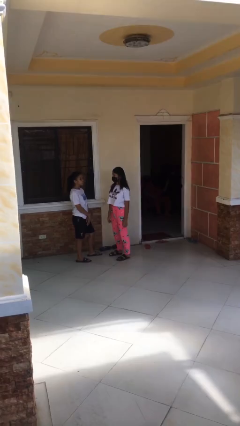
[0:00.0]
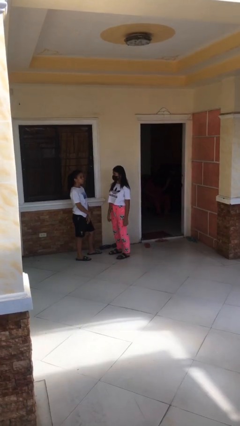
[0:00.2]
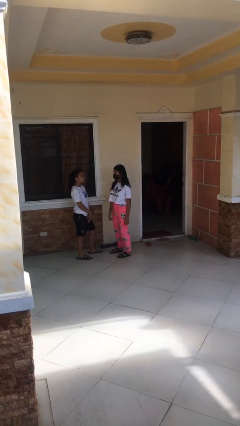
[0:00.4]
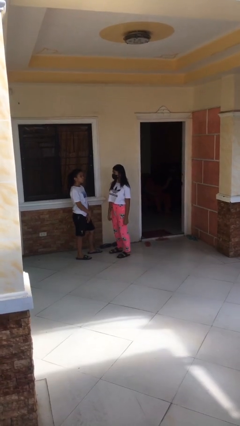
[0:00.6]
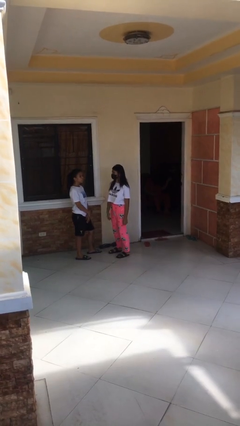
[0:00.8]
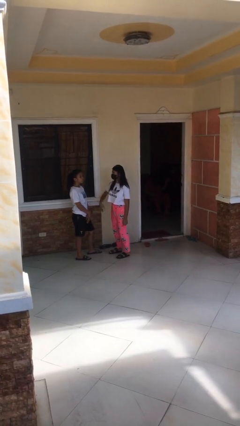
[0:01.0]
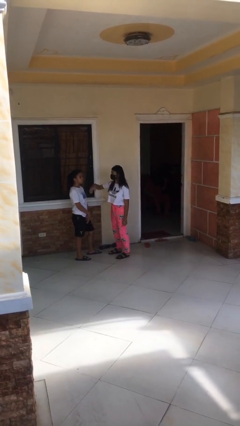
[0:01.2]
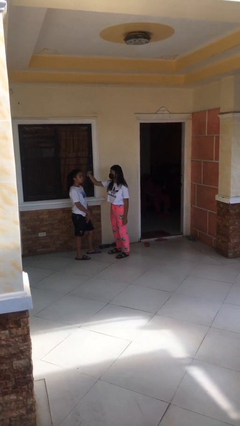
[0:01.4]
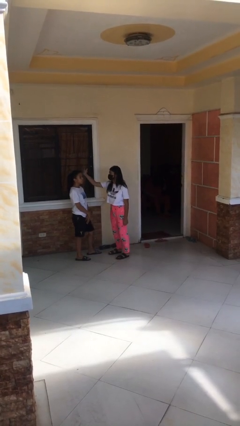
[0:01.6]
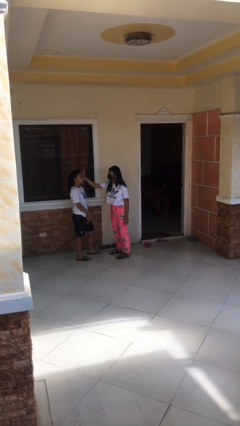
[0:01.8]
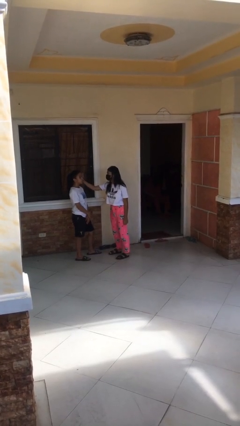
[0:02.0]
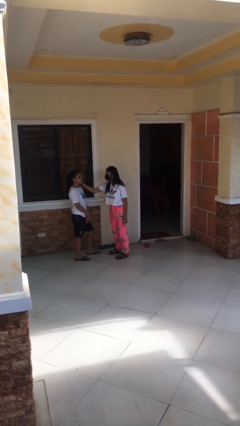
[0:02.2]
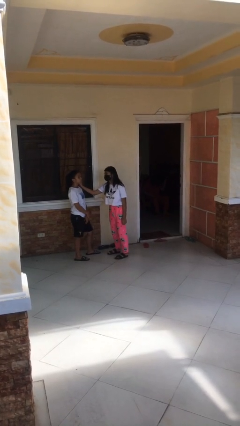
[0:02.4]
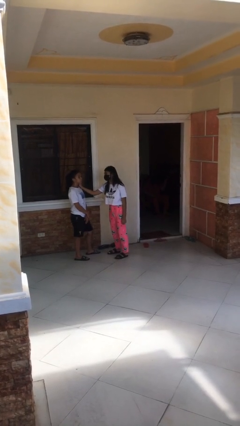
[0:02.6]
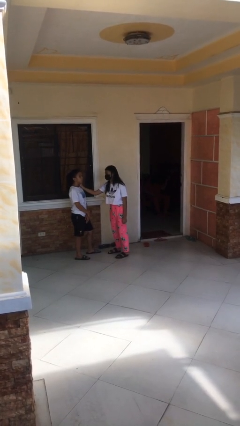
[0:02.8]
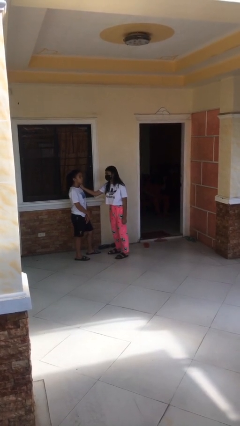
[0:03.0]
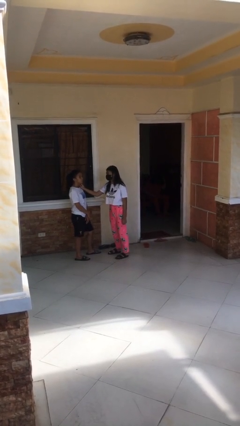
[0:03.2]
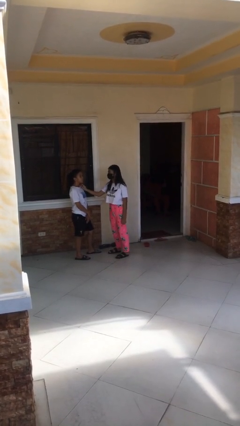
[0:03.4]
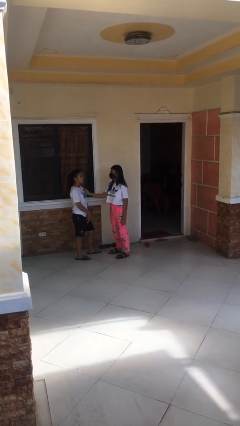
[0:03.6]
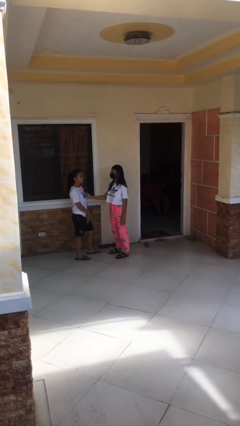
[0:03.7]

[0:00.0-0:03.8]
person touches face of person

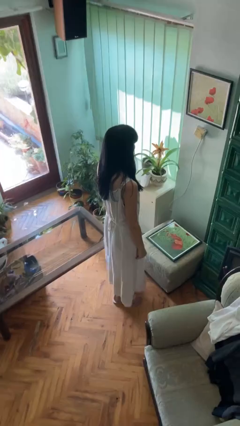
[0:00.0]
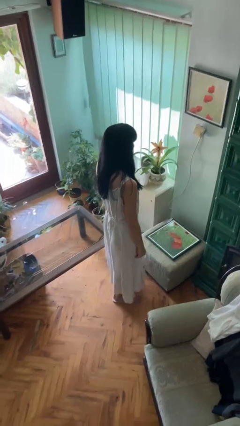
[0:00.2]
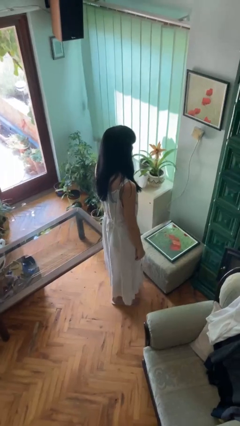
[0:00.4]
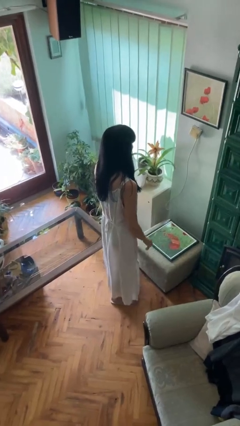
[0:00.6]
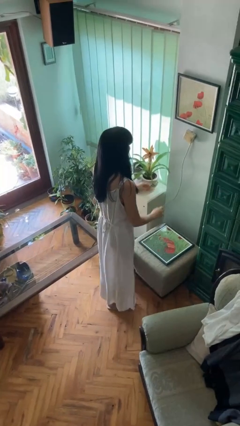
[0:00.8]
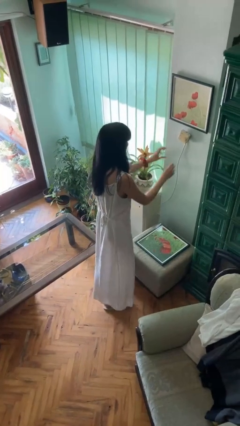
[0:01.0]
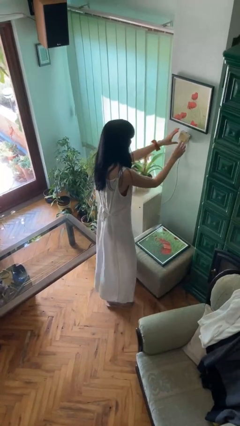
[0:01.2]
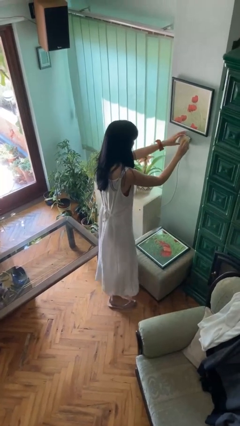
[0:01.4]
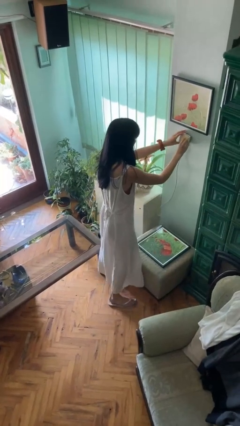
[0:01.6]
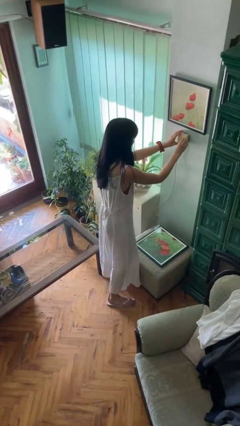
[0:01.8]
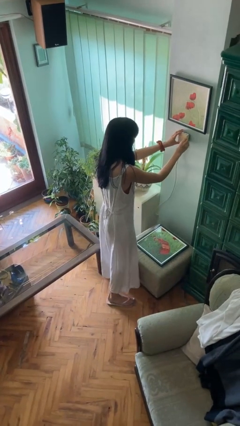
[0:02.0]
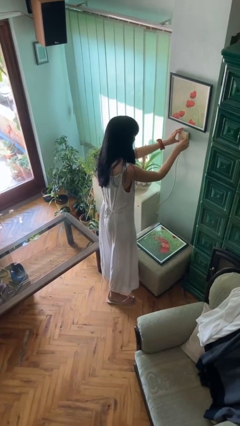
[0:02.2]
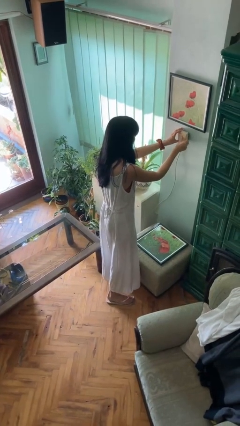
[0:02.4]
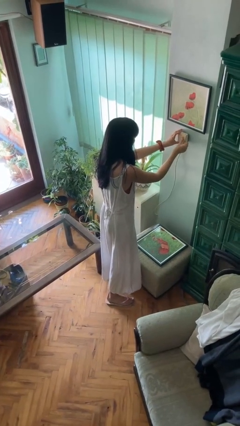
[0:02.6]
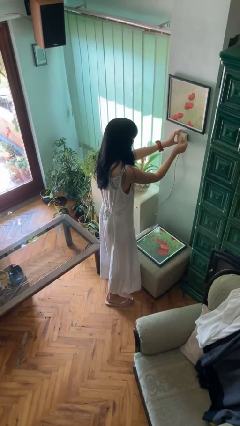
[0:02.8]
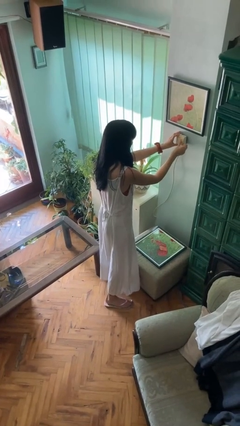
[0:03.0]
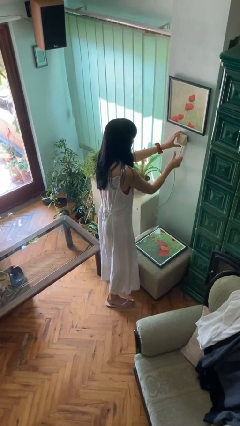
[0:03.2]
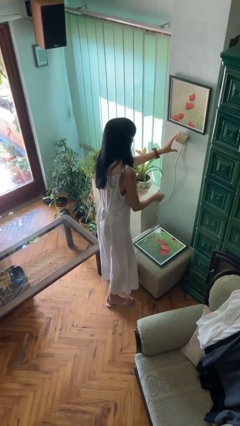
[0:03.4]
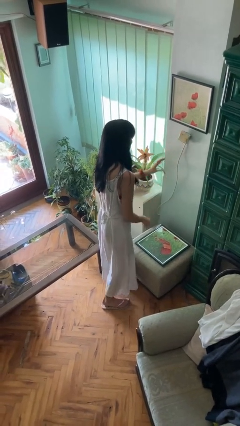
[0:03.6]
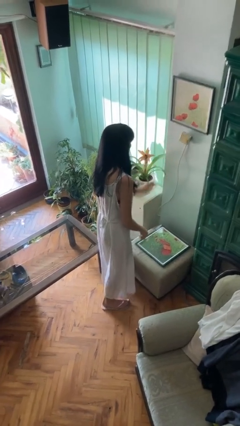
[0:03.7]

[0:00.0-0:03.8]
person adjusts thermostat

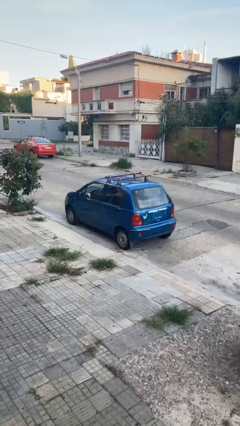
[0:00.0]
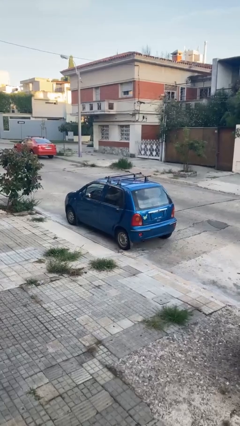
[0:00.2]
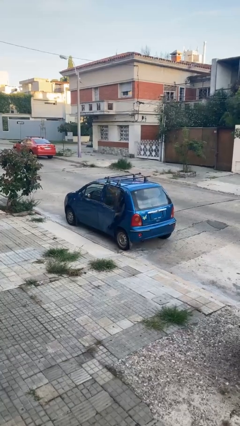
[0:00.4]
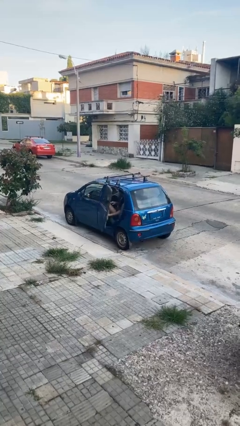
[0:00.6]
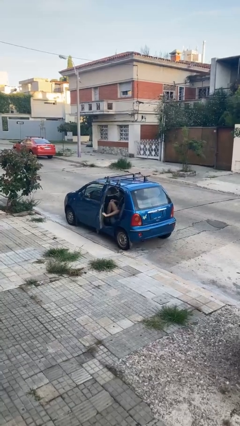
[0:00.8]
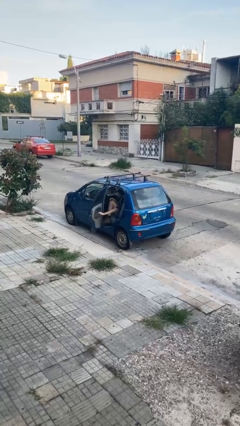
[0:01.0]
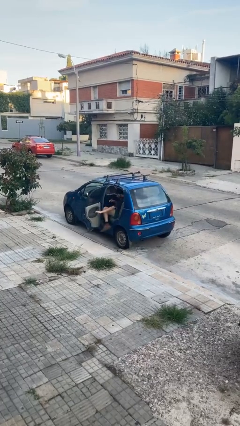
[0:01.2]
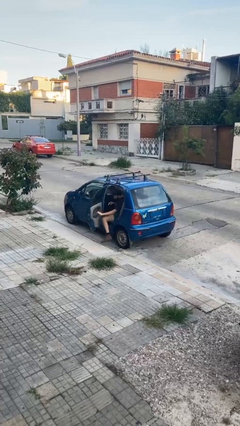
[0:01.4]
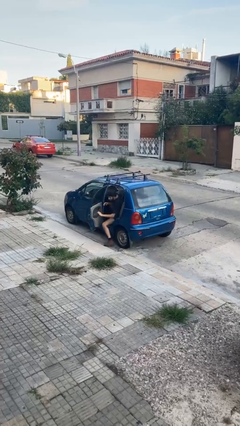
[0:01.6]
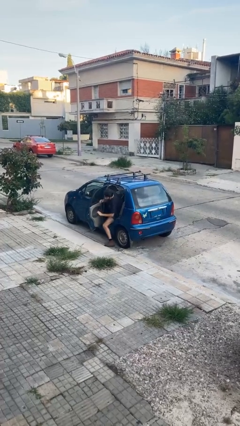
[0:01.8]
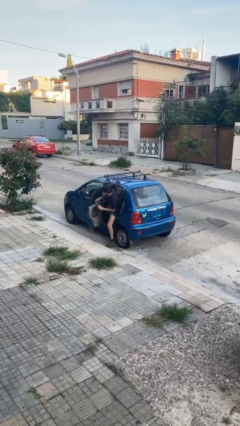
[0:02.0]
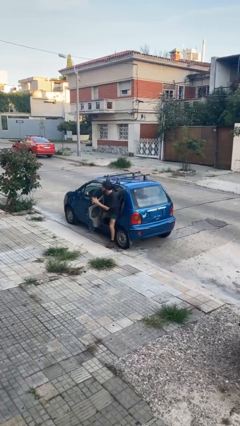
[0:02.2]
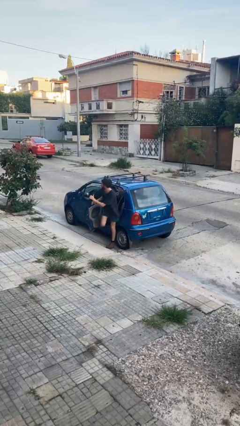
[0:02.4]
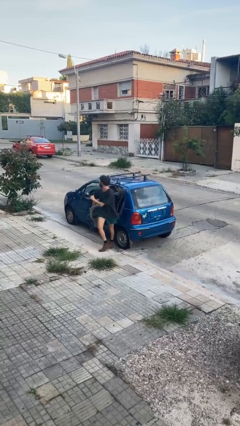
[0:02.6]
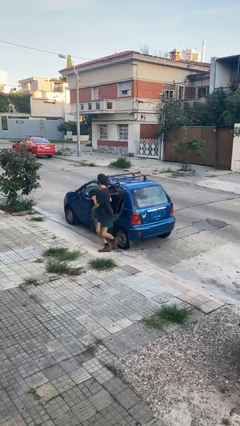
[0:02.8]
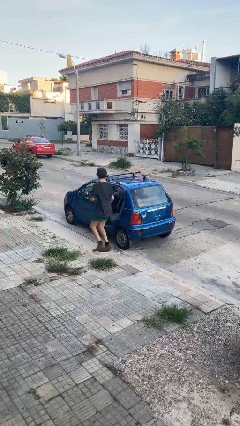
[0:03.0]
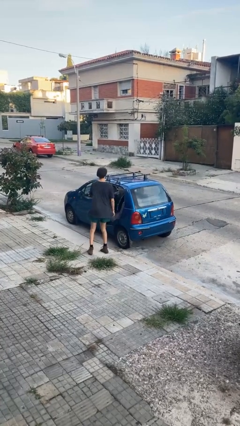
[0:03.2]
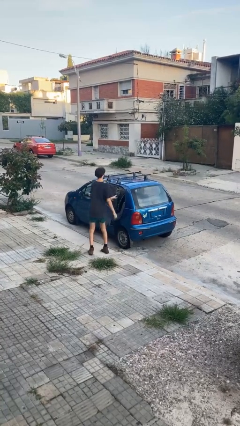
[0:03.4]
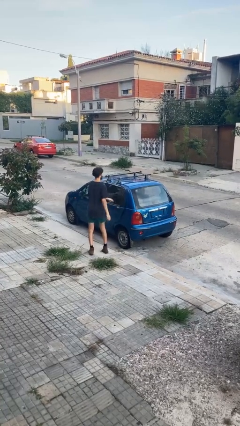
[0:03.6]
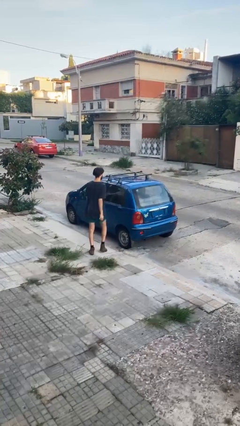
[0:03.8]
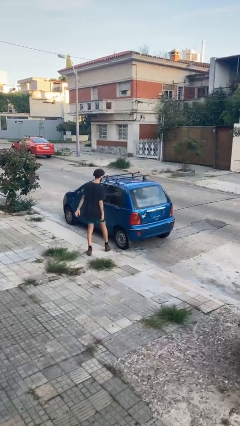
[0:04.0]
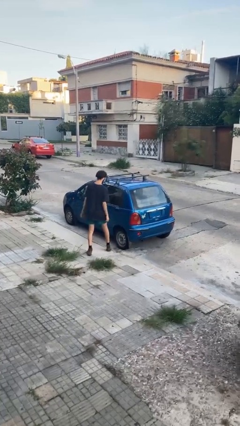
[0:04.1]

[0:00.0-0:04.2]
car drops off person

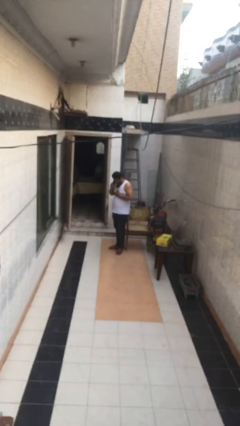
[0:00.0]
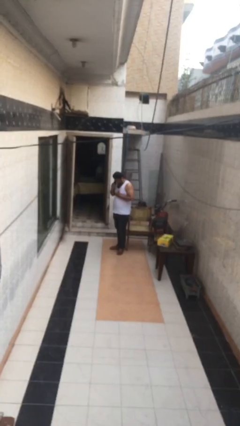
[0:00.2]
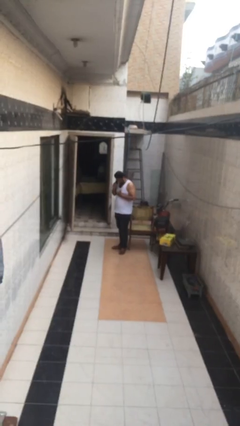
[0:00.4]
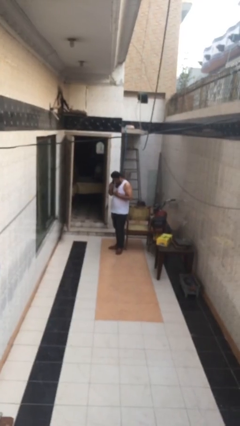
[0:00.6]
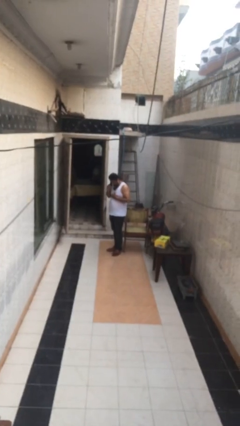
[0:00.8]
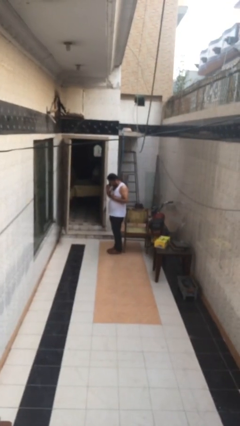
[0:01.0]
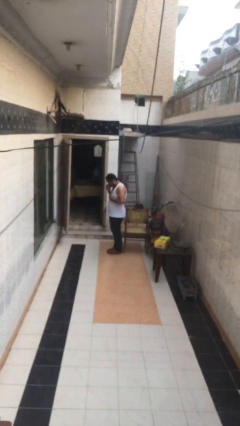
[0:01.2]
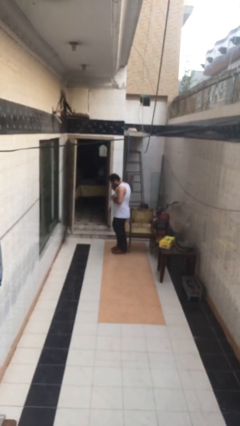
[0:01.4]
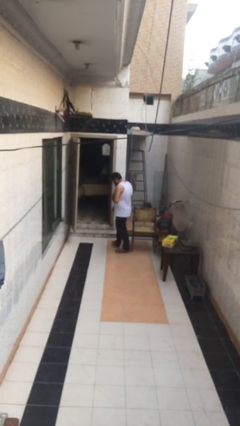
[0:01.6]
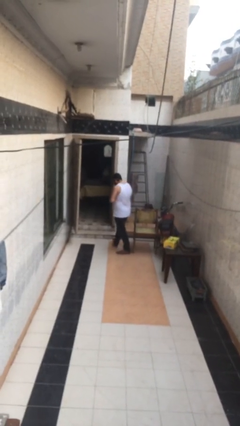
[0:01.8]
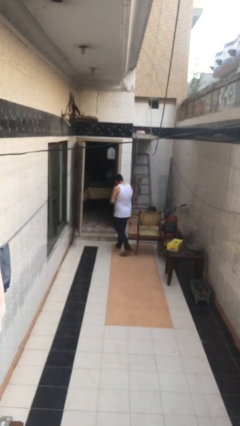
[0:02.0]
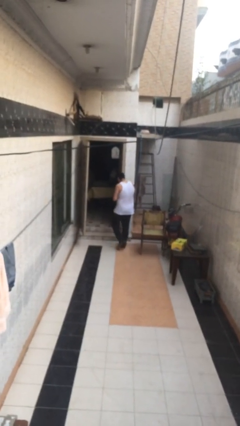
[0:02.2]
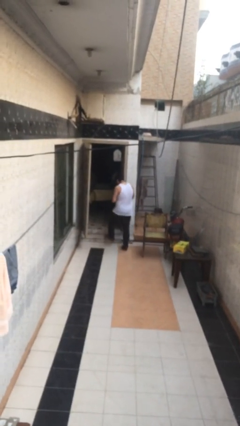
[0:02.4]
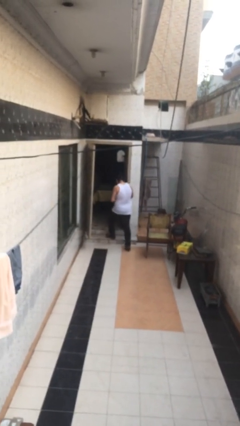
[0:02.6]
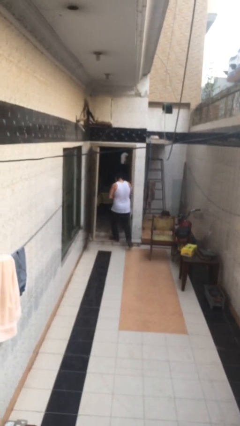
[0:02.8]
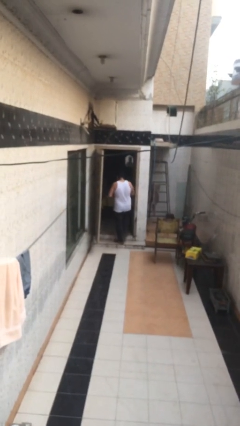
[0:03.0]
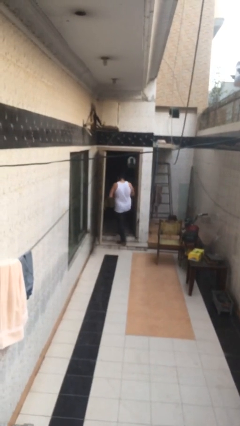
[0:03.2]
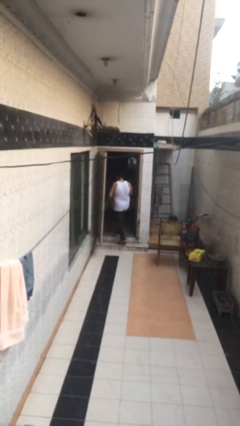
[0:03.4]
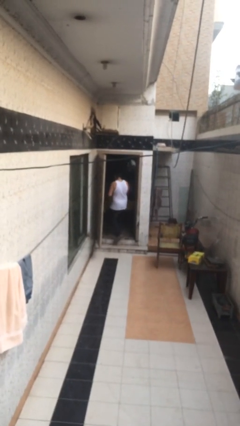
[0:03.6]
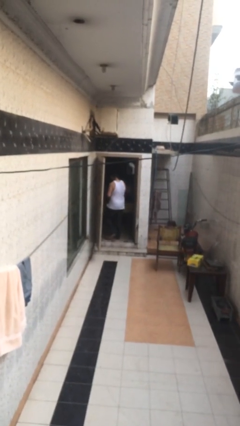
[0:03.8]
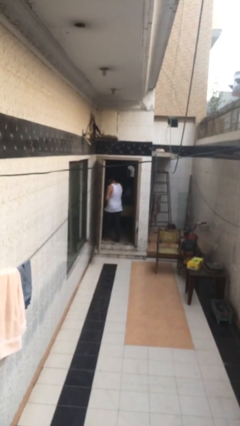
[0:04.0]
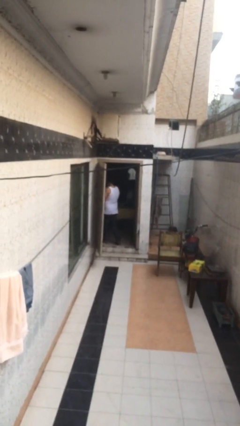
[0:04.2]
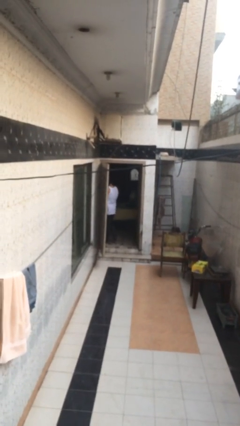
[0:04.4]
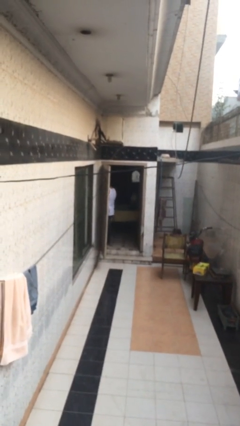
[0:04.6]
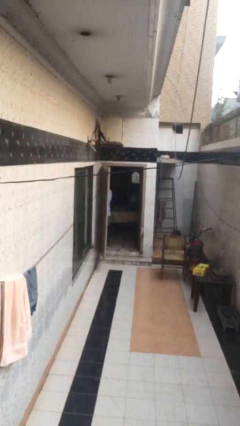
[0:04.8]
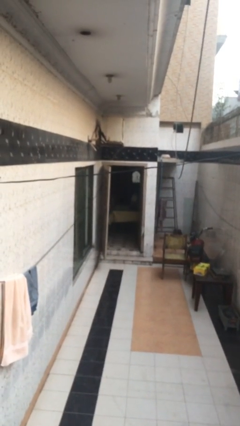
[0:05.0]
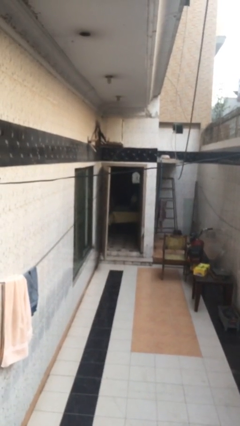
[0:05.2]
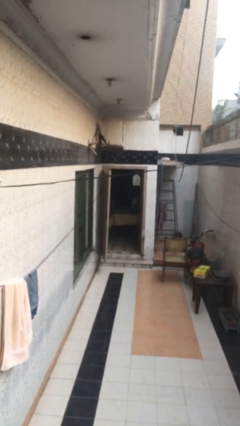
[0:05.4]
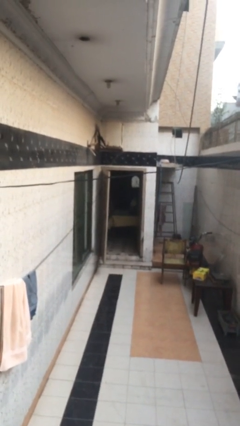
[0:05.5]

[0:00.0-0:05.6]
person exits scene through structure
